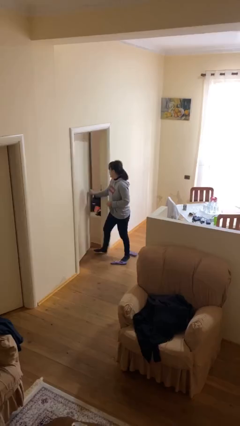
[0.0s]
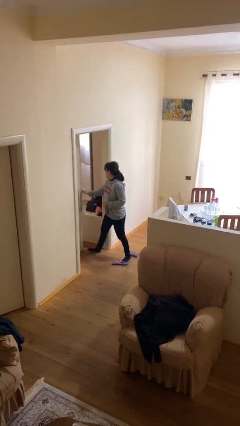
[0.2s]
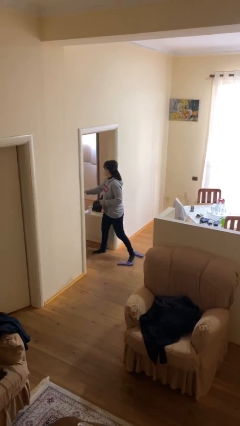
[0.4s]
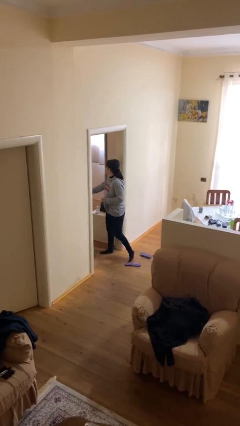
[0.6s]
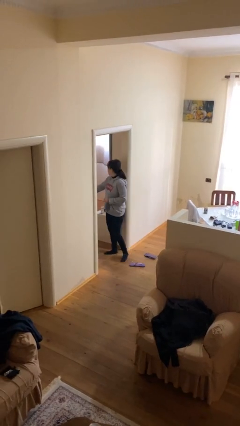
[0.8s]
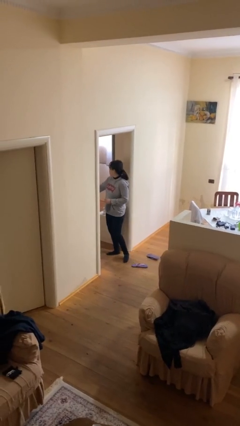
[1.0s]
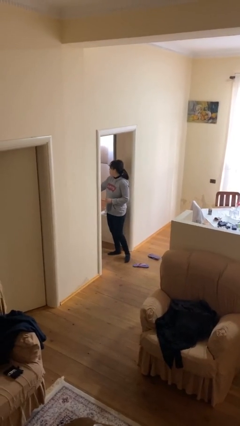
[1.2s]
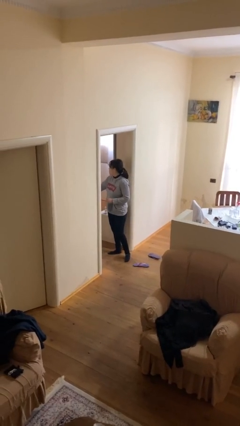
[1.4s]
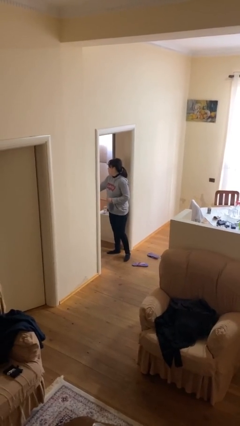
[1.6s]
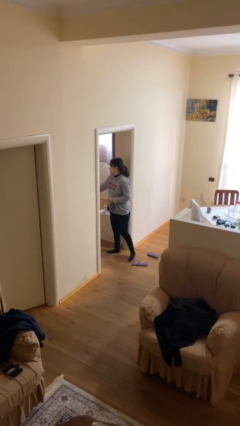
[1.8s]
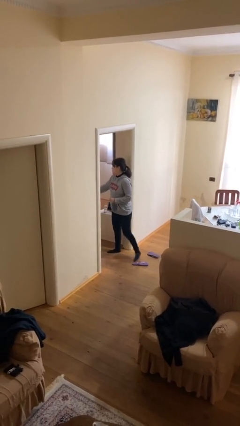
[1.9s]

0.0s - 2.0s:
person opens facility door

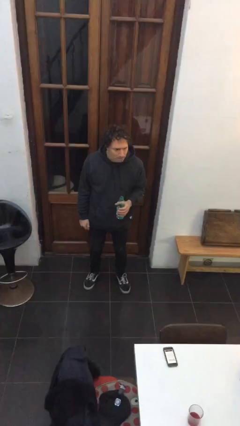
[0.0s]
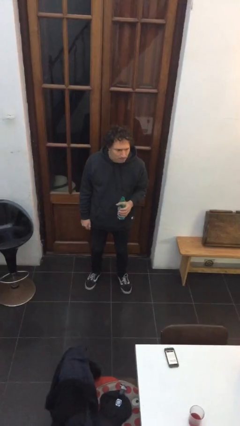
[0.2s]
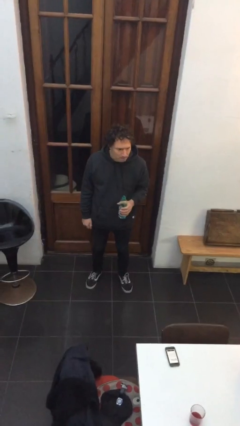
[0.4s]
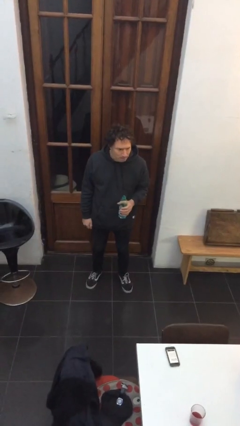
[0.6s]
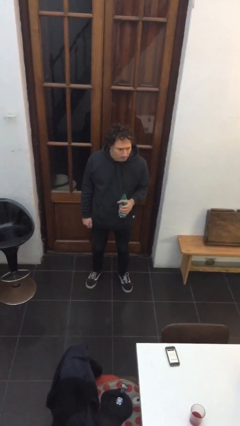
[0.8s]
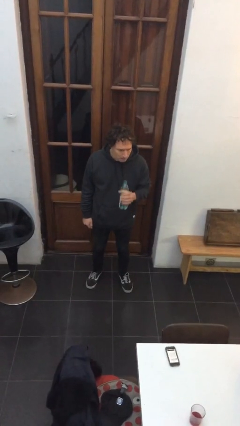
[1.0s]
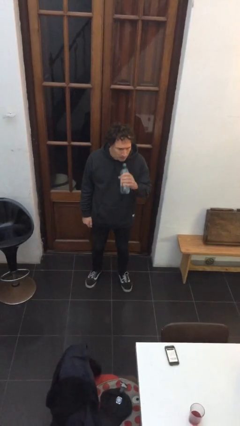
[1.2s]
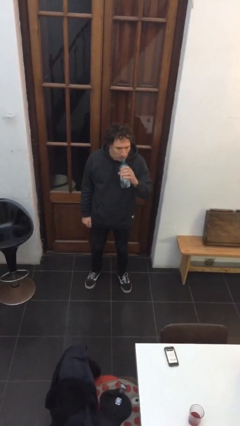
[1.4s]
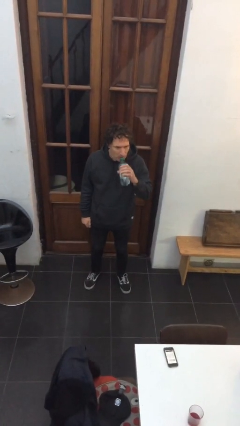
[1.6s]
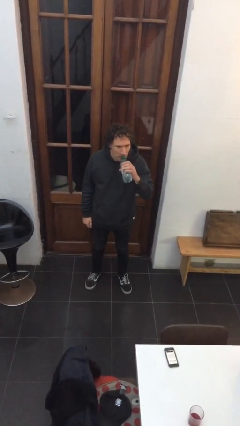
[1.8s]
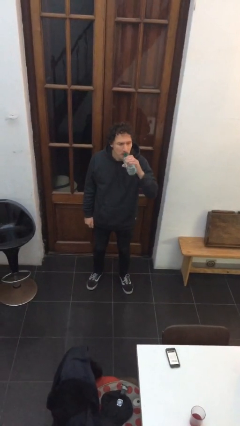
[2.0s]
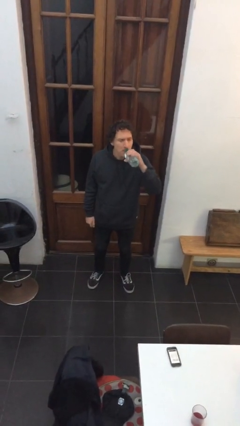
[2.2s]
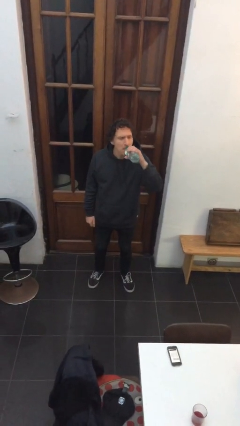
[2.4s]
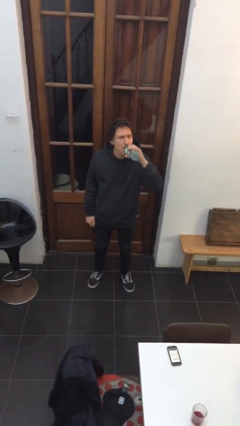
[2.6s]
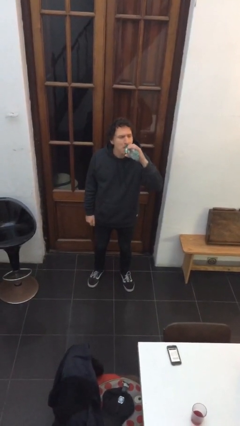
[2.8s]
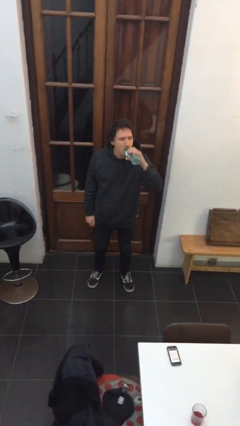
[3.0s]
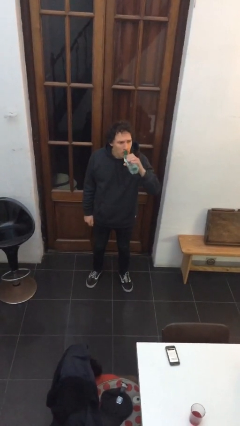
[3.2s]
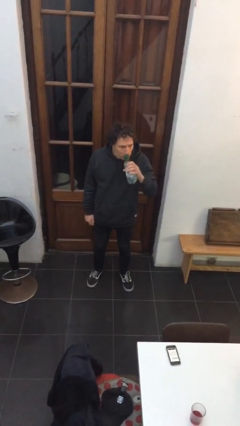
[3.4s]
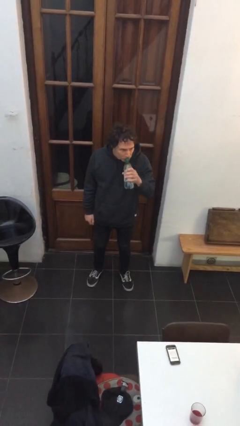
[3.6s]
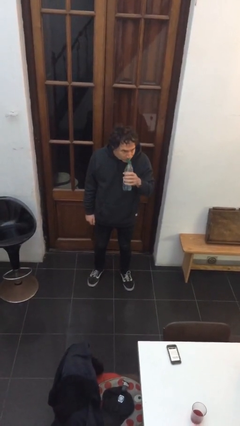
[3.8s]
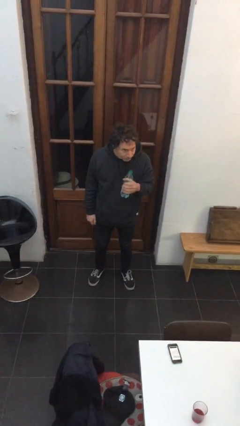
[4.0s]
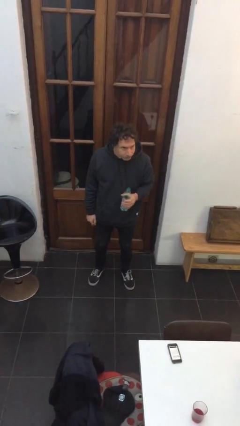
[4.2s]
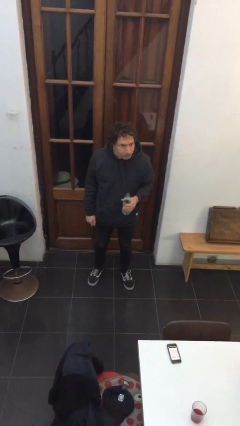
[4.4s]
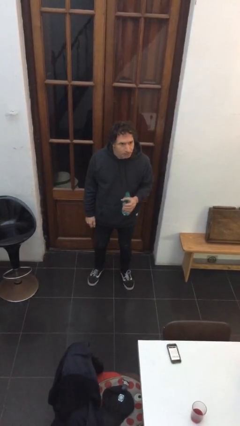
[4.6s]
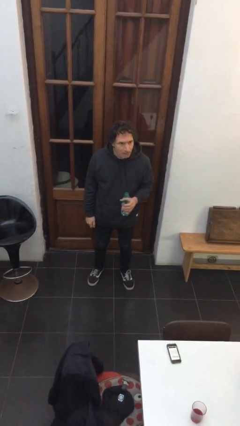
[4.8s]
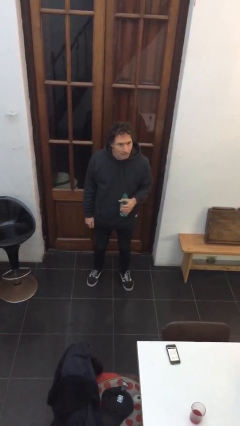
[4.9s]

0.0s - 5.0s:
person drinks from bottle

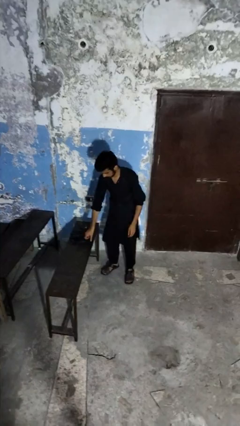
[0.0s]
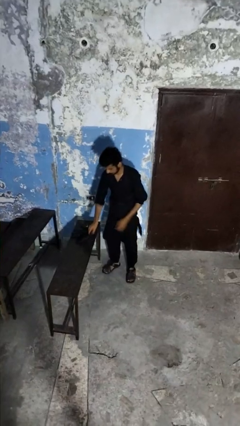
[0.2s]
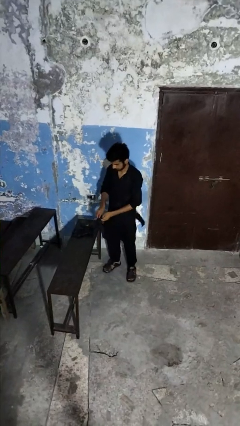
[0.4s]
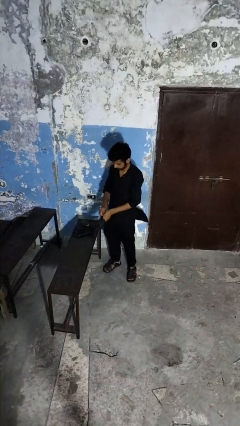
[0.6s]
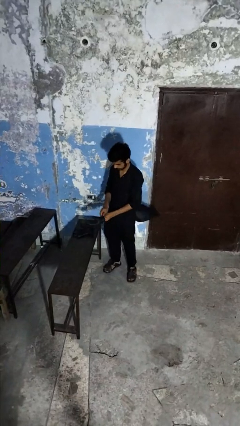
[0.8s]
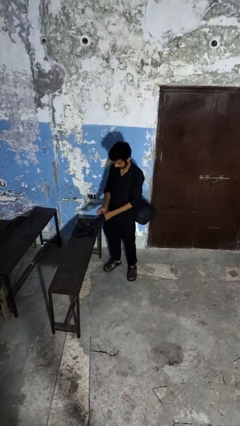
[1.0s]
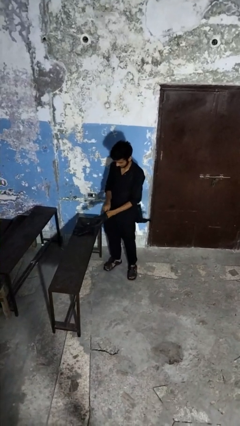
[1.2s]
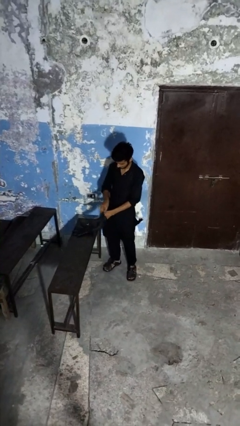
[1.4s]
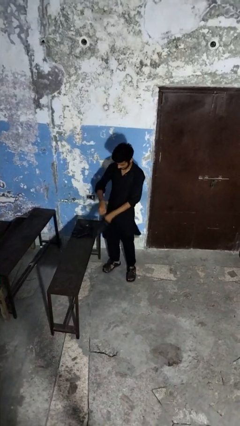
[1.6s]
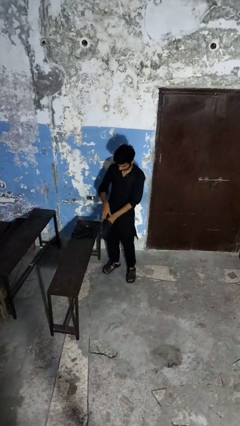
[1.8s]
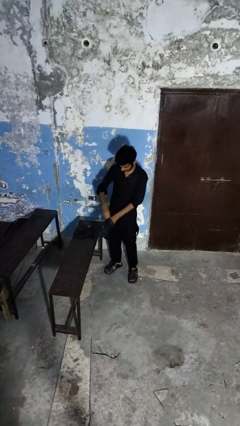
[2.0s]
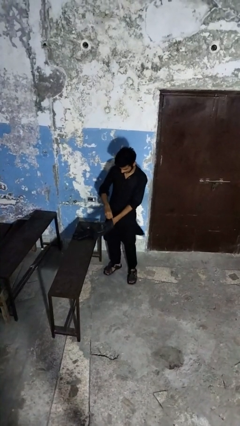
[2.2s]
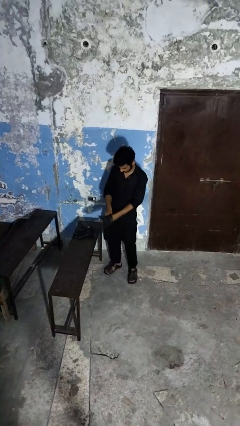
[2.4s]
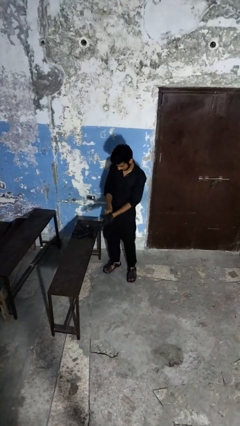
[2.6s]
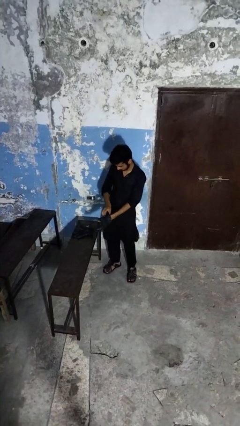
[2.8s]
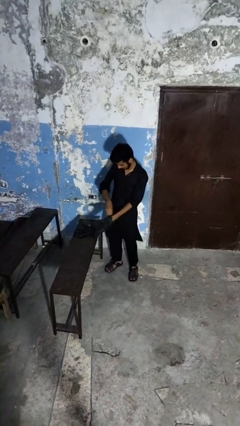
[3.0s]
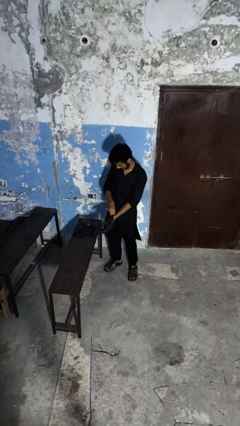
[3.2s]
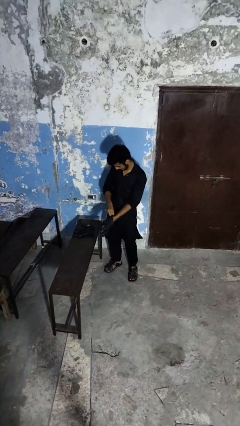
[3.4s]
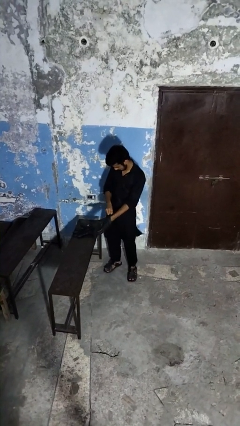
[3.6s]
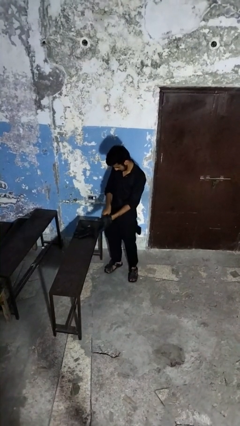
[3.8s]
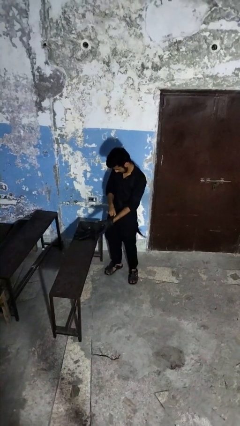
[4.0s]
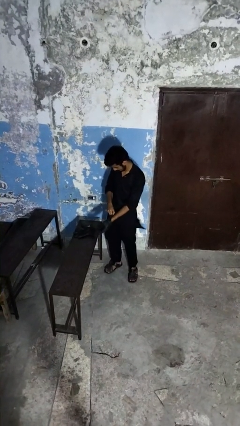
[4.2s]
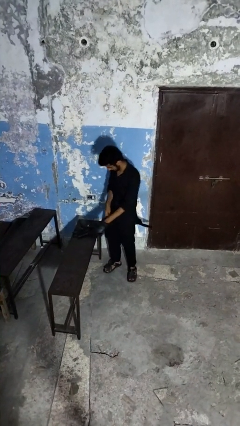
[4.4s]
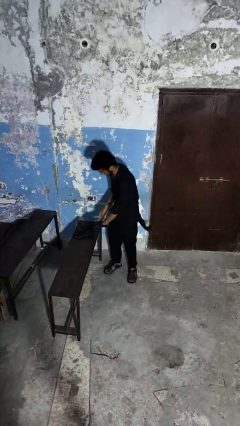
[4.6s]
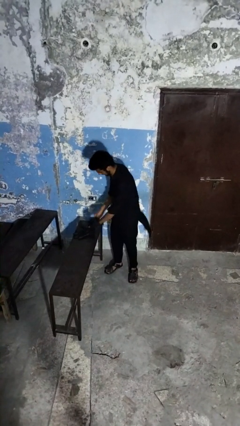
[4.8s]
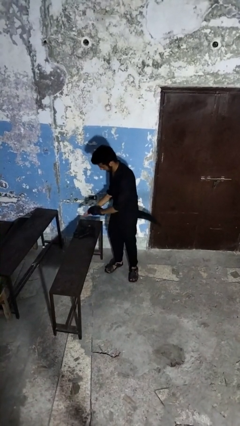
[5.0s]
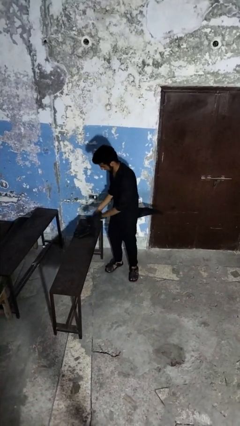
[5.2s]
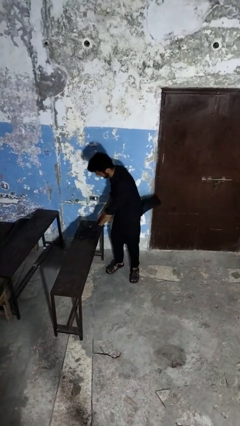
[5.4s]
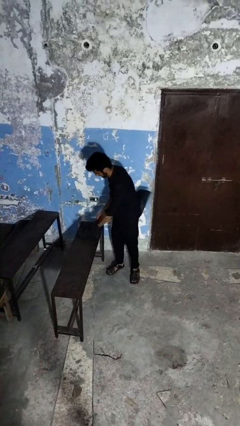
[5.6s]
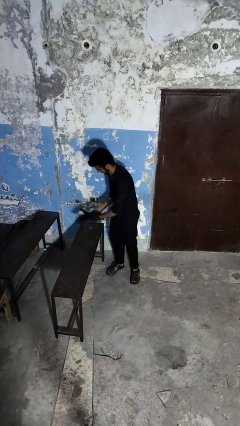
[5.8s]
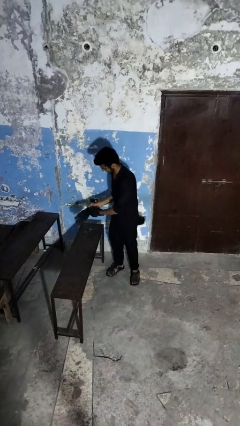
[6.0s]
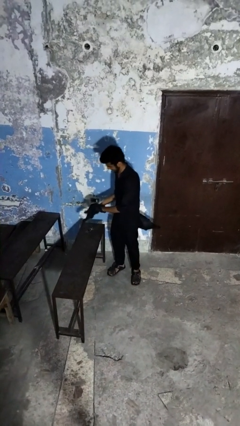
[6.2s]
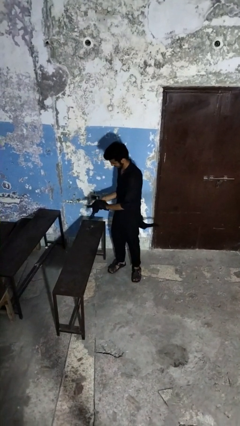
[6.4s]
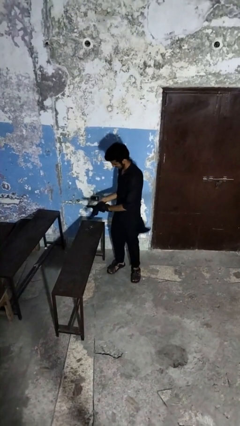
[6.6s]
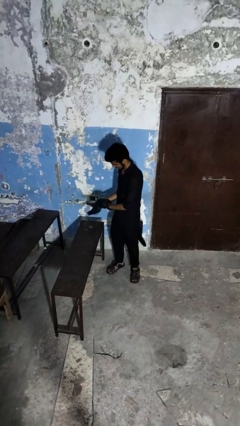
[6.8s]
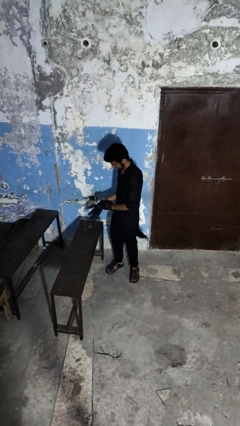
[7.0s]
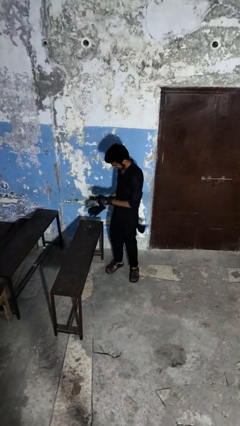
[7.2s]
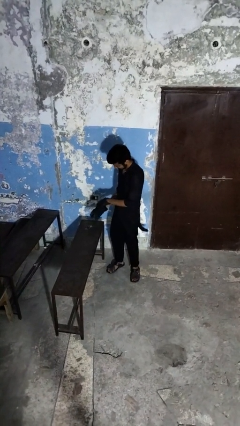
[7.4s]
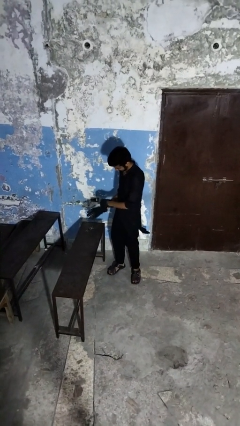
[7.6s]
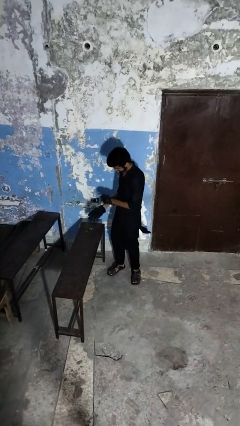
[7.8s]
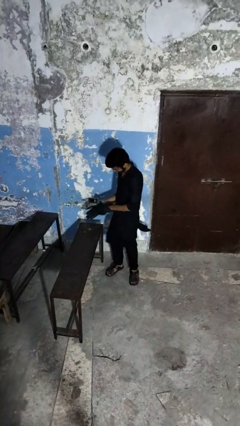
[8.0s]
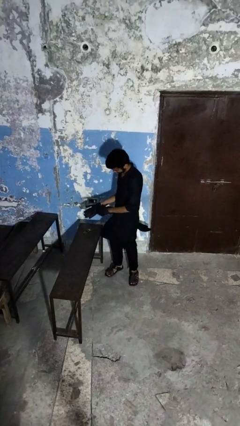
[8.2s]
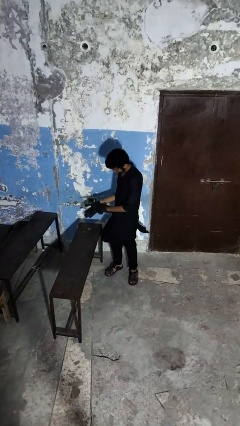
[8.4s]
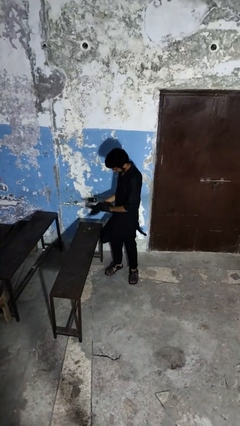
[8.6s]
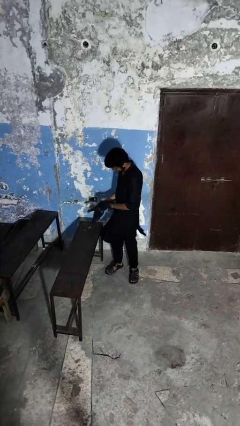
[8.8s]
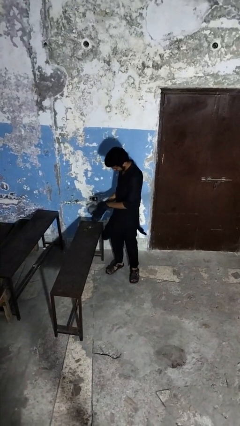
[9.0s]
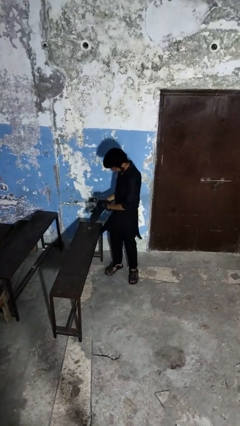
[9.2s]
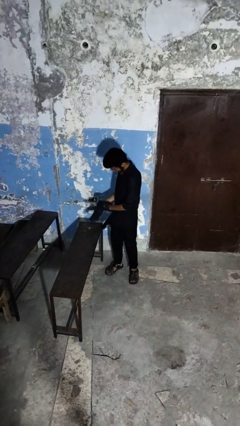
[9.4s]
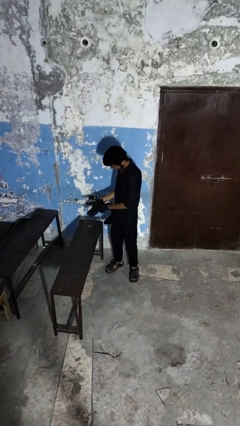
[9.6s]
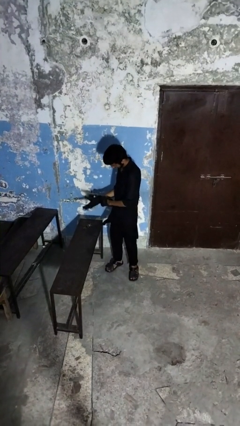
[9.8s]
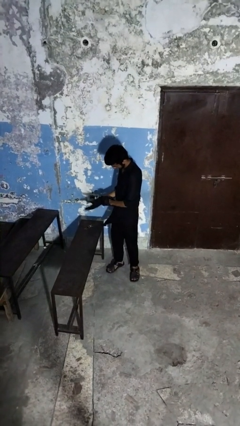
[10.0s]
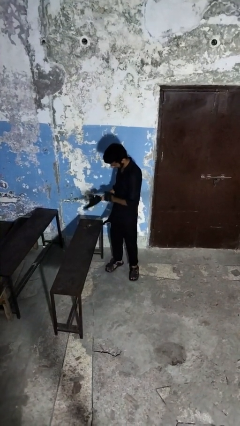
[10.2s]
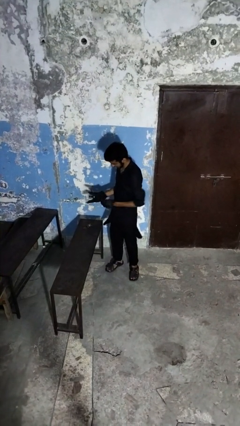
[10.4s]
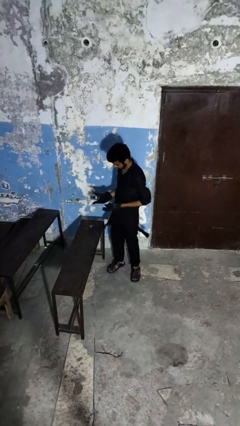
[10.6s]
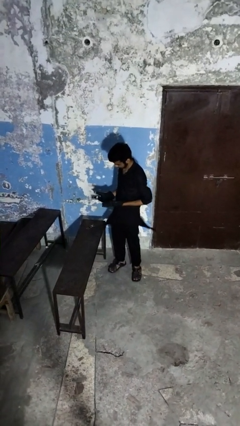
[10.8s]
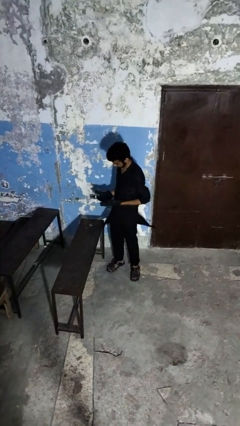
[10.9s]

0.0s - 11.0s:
person puts on gloves

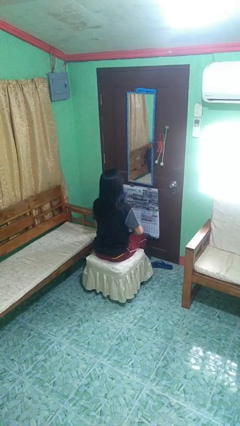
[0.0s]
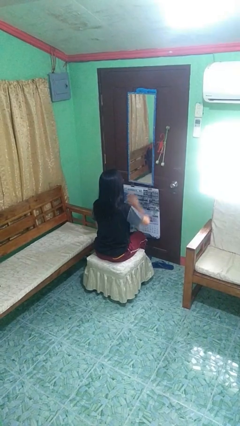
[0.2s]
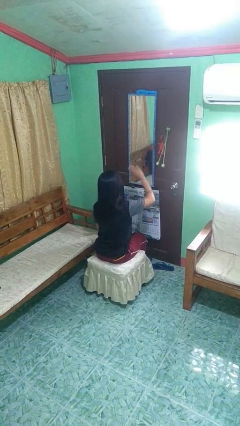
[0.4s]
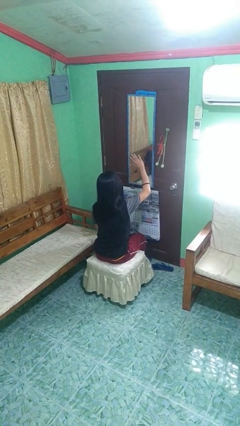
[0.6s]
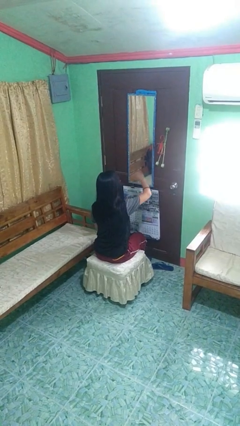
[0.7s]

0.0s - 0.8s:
person gestures swipe up
